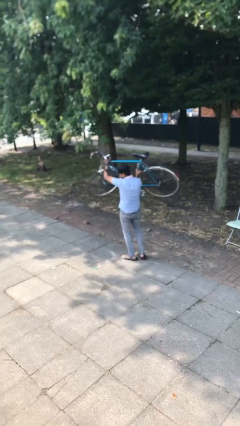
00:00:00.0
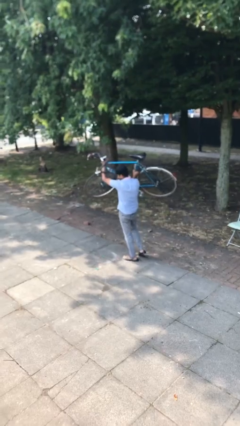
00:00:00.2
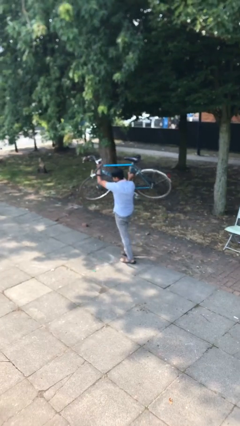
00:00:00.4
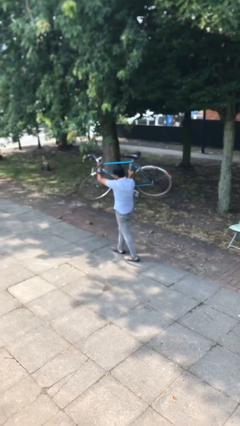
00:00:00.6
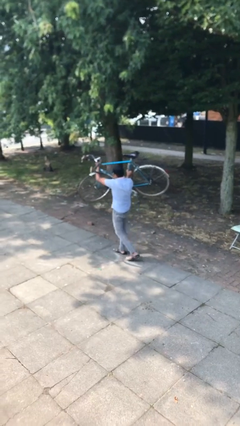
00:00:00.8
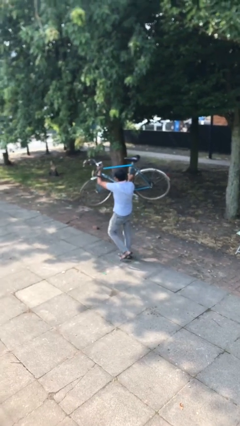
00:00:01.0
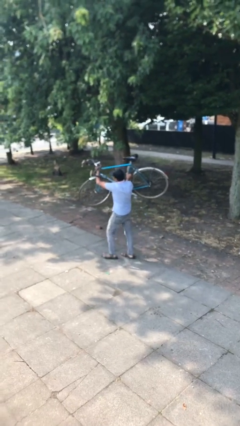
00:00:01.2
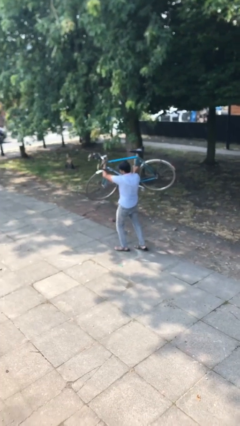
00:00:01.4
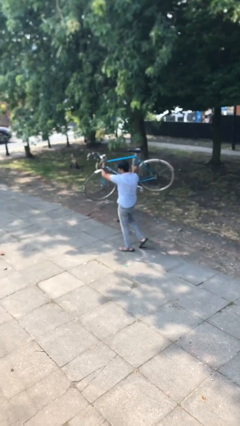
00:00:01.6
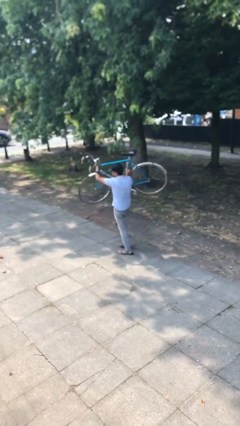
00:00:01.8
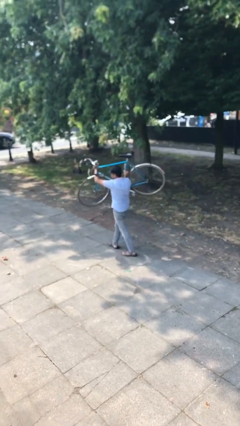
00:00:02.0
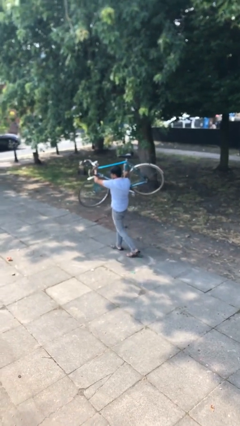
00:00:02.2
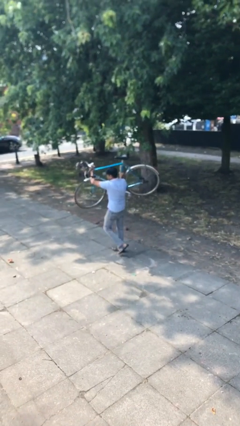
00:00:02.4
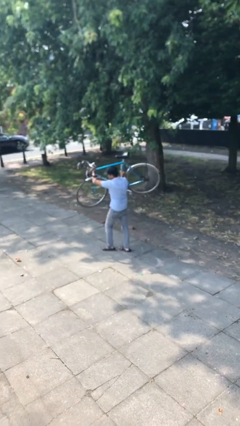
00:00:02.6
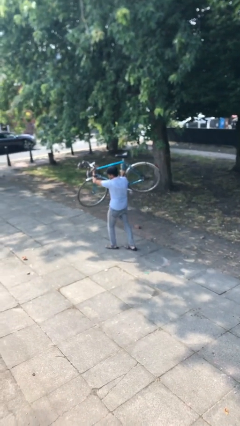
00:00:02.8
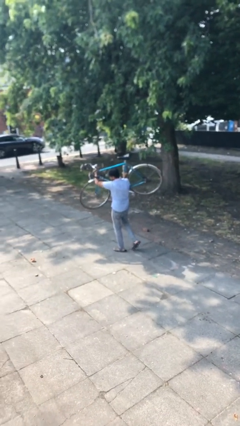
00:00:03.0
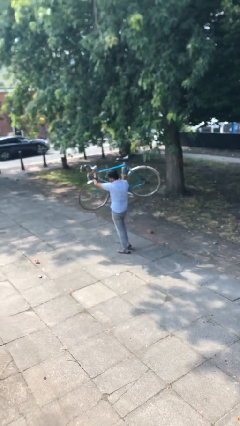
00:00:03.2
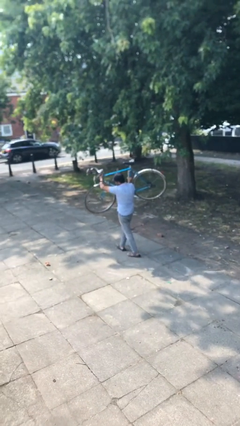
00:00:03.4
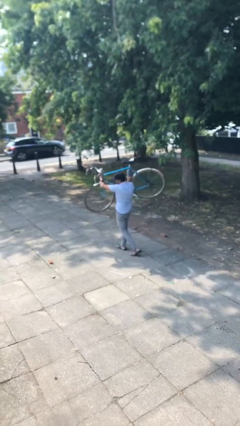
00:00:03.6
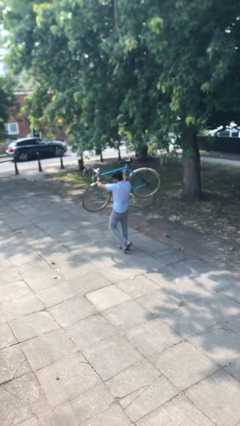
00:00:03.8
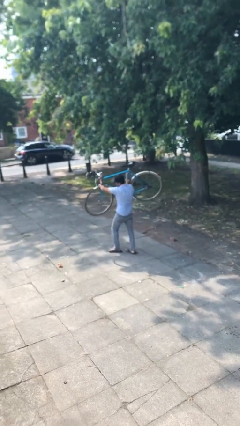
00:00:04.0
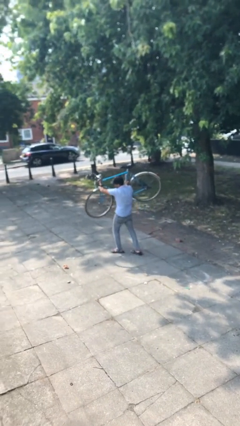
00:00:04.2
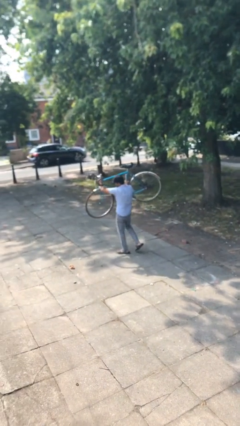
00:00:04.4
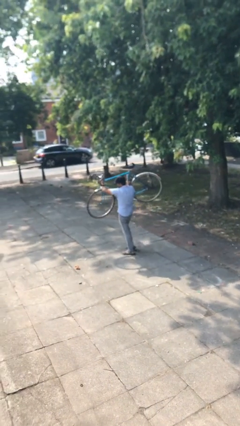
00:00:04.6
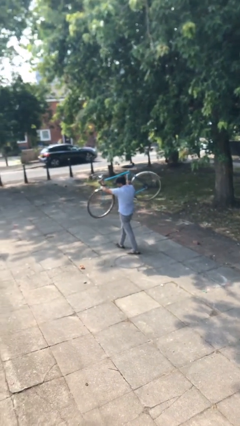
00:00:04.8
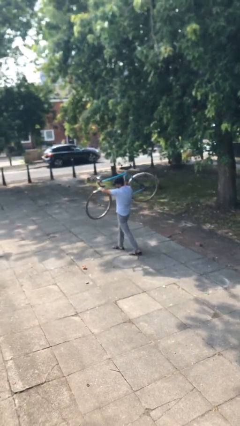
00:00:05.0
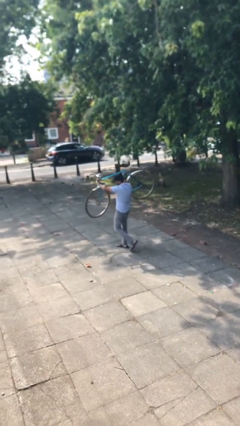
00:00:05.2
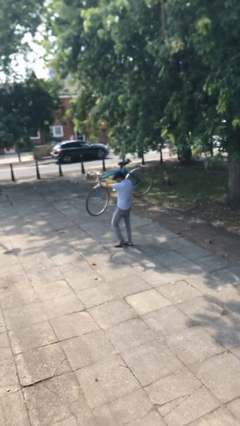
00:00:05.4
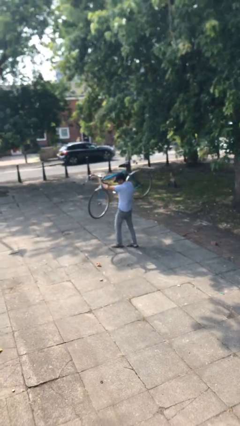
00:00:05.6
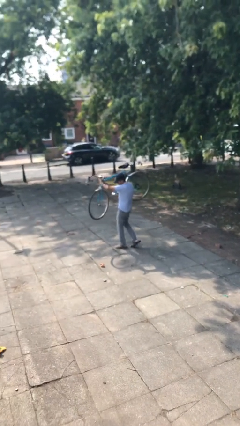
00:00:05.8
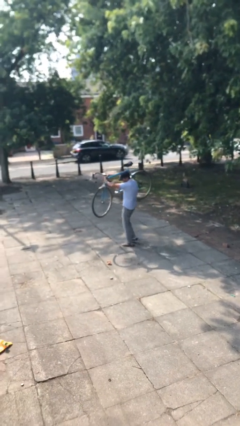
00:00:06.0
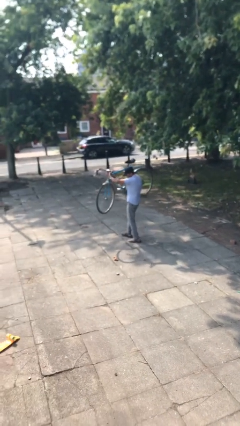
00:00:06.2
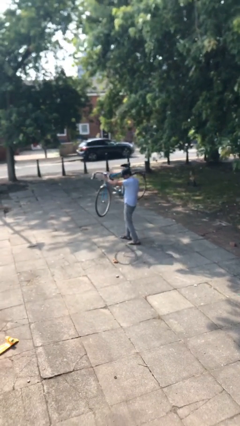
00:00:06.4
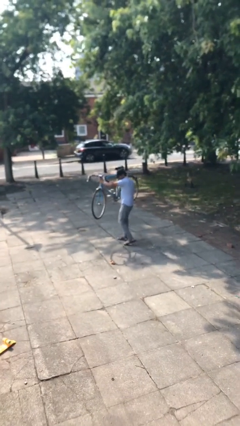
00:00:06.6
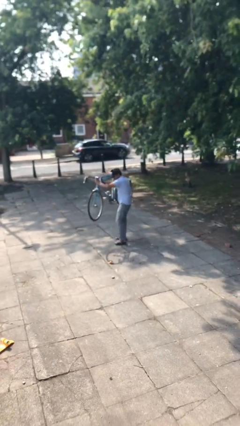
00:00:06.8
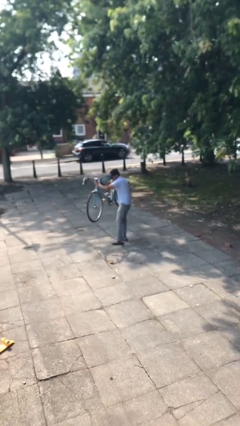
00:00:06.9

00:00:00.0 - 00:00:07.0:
person carries heavy object

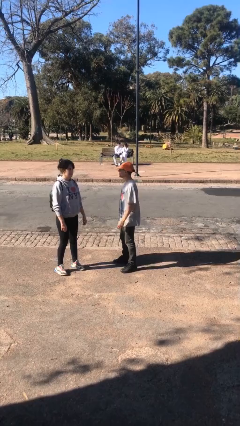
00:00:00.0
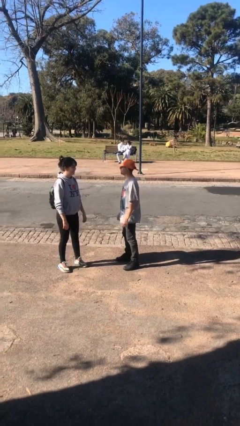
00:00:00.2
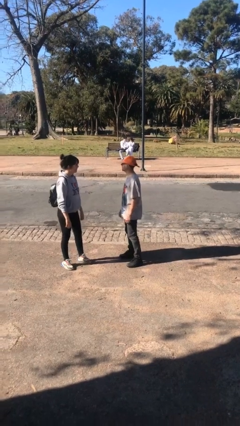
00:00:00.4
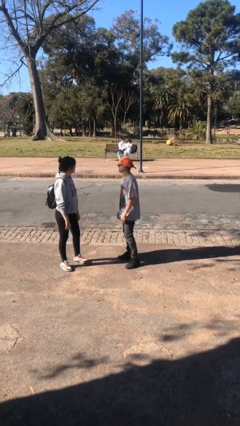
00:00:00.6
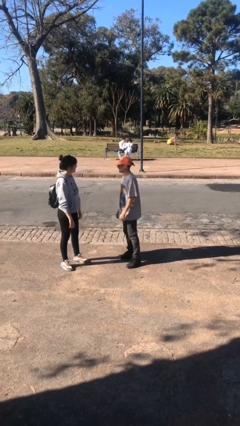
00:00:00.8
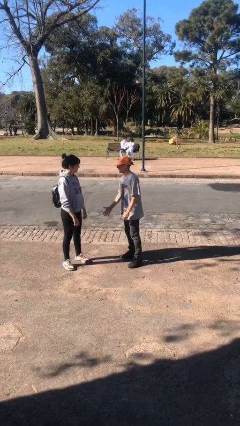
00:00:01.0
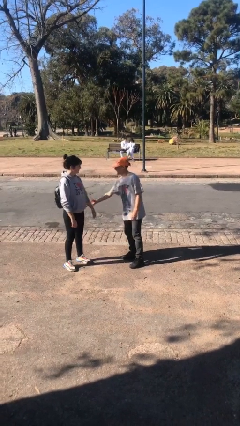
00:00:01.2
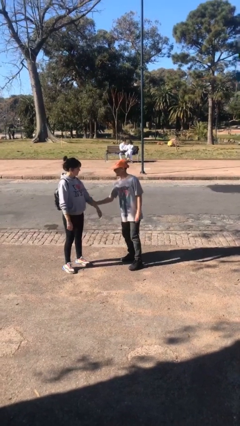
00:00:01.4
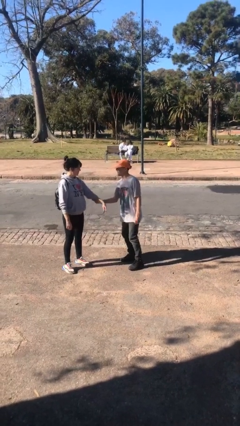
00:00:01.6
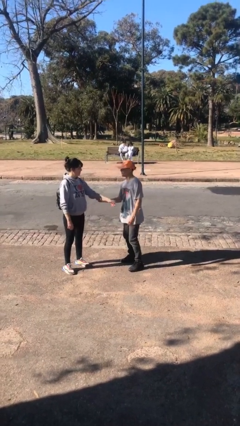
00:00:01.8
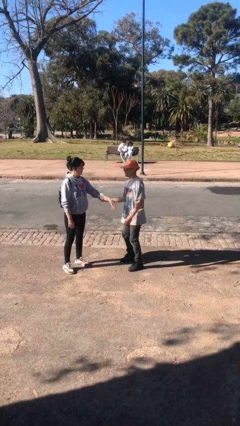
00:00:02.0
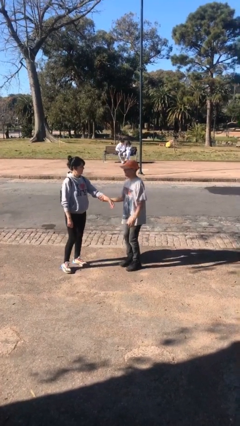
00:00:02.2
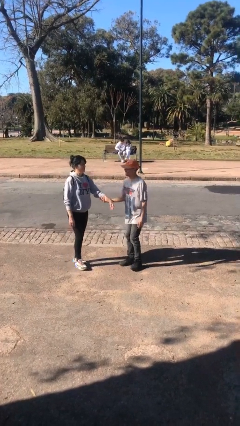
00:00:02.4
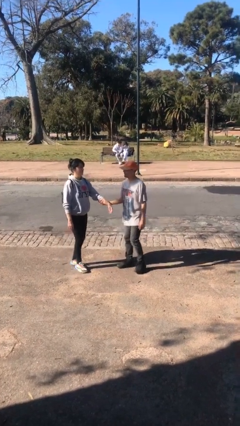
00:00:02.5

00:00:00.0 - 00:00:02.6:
person grabs person by forearm

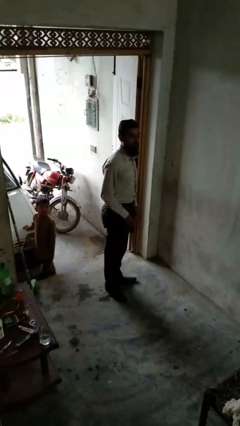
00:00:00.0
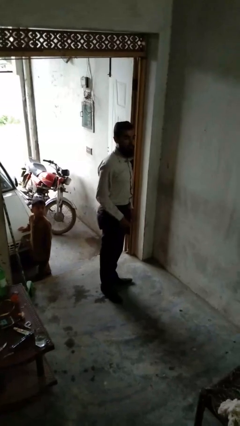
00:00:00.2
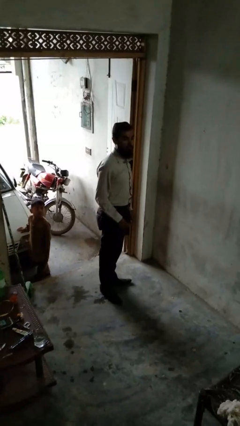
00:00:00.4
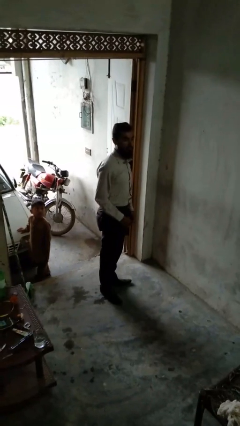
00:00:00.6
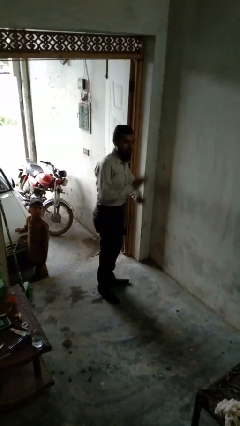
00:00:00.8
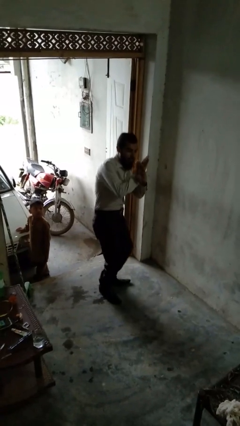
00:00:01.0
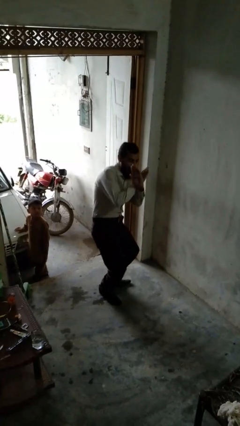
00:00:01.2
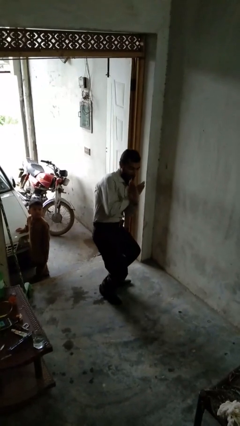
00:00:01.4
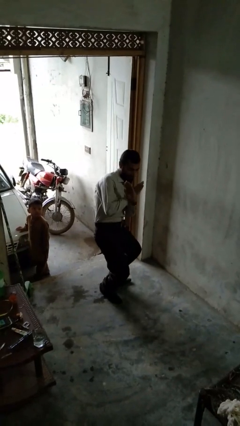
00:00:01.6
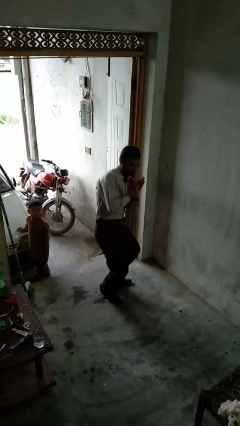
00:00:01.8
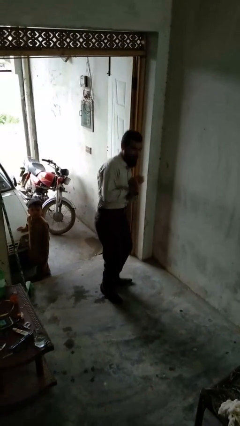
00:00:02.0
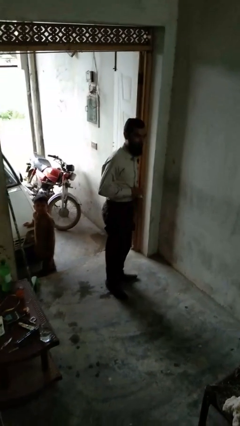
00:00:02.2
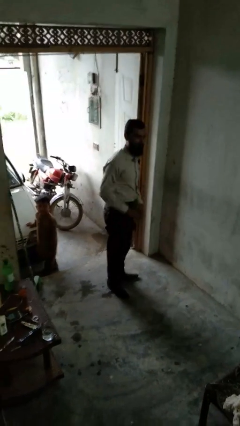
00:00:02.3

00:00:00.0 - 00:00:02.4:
person karate chop

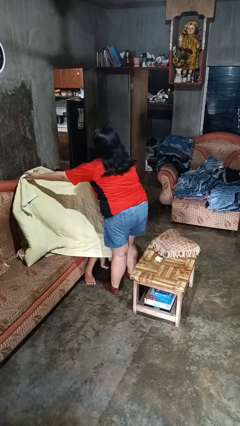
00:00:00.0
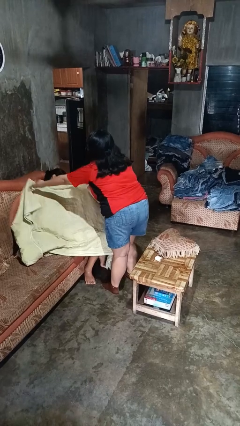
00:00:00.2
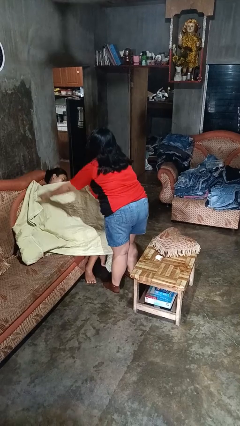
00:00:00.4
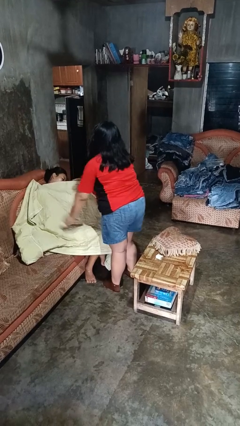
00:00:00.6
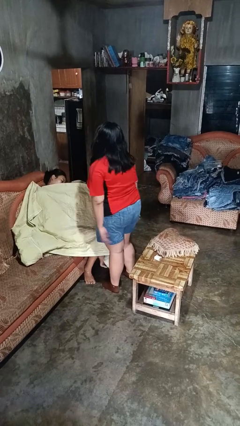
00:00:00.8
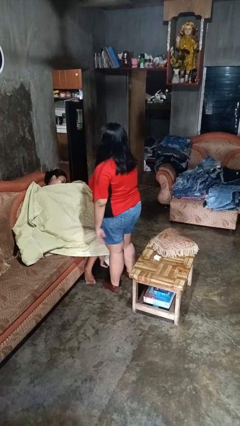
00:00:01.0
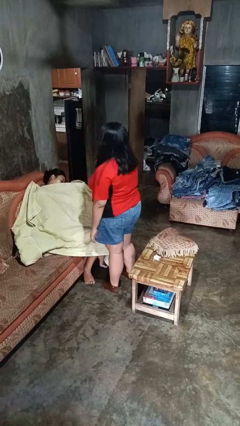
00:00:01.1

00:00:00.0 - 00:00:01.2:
person covers friend with blanket

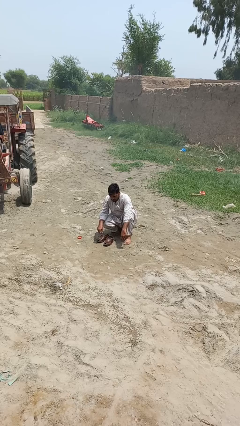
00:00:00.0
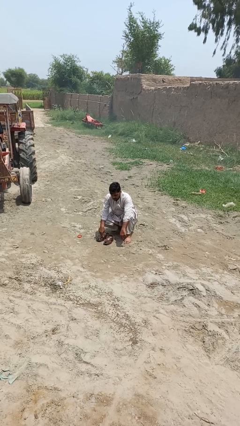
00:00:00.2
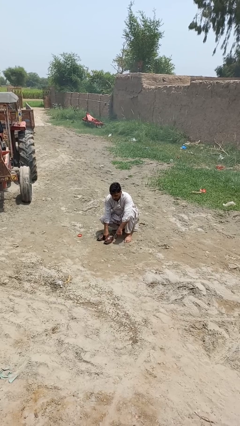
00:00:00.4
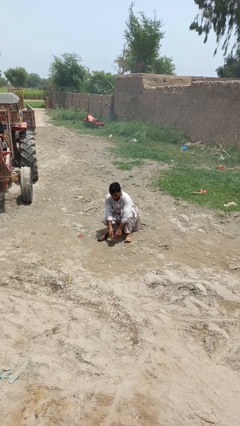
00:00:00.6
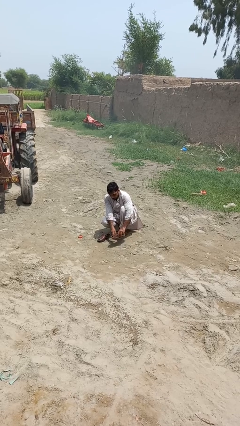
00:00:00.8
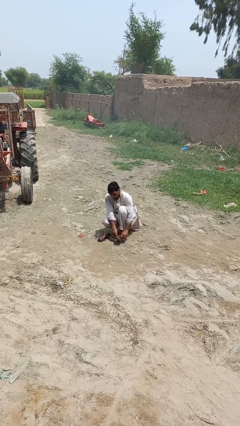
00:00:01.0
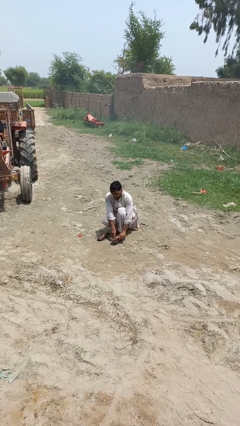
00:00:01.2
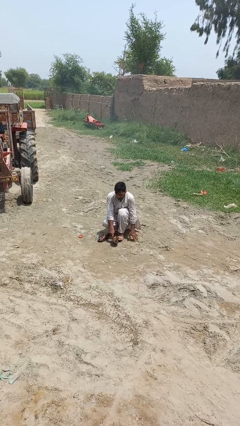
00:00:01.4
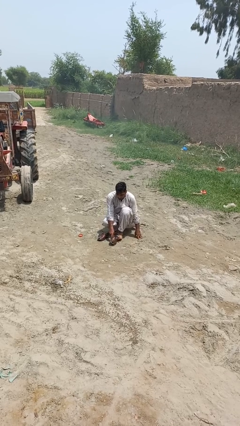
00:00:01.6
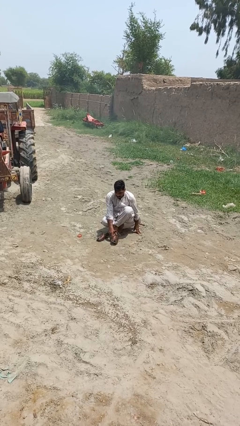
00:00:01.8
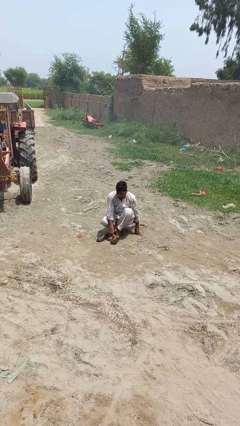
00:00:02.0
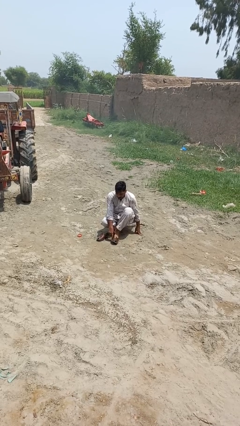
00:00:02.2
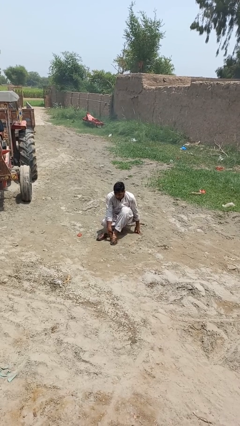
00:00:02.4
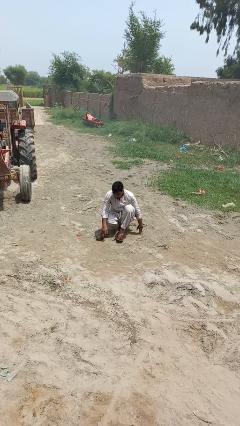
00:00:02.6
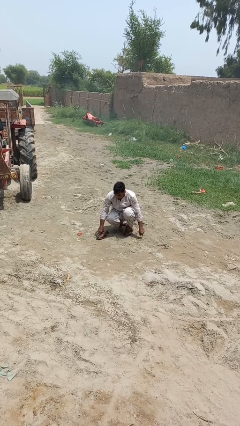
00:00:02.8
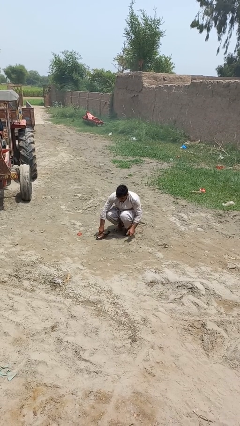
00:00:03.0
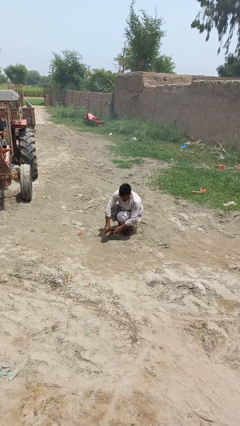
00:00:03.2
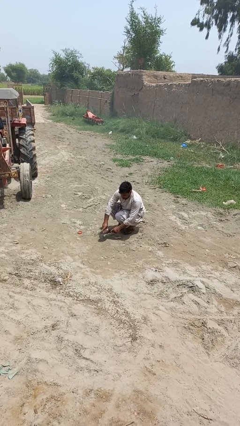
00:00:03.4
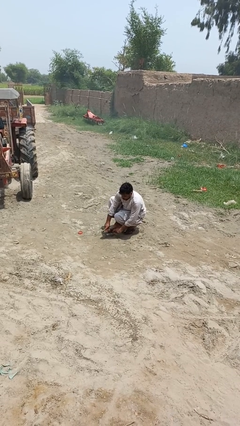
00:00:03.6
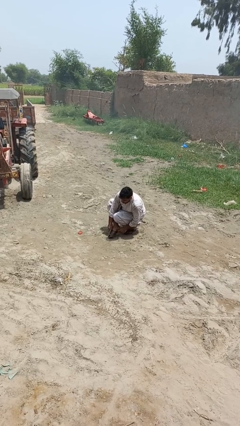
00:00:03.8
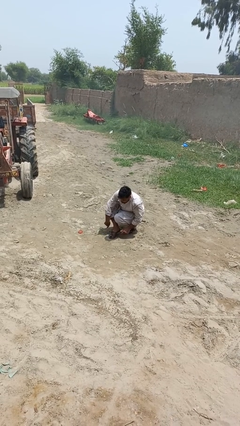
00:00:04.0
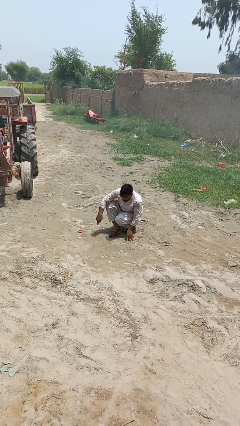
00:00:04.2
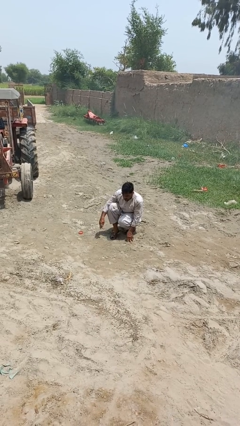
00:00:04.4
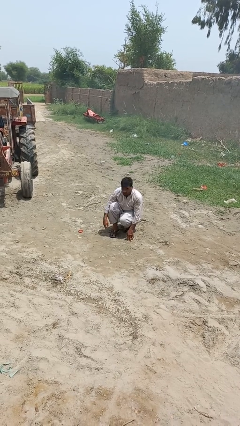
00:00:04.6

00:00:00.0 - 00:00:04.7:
person puts on shoes

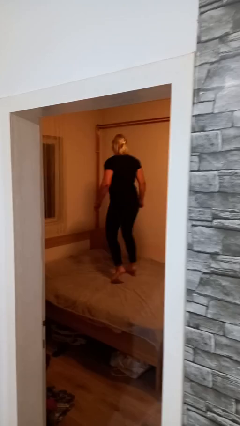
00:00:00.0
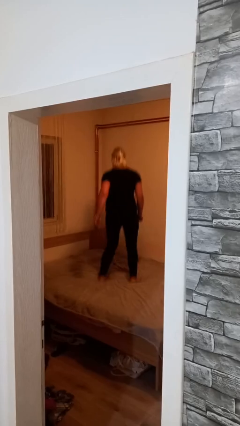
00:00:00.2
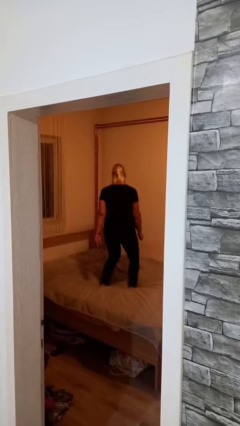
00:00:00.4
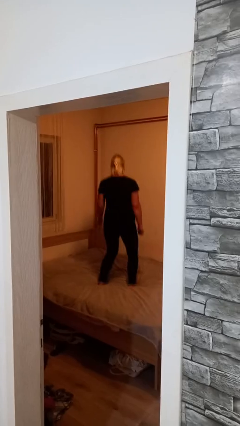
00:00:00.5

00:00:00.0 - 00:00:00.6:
person jumps on bed
